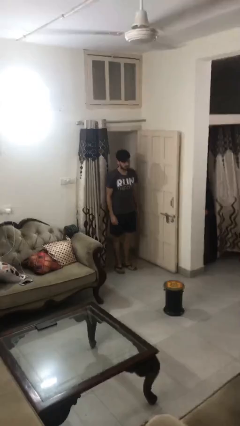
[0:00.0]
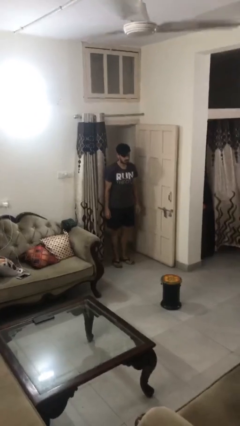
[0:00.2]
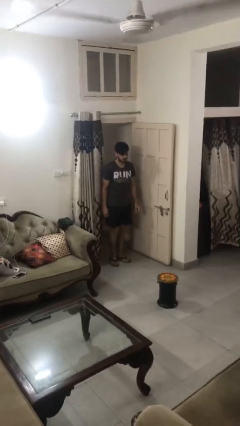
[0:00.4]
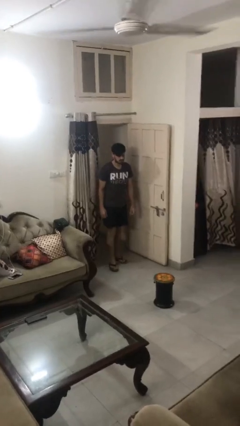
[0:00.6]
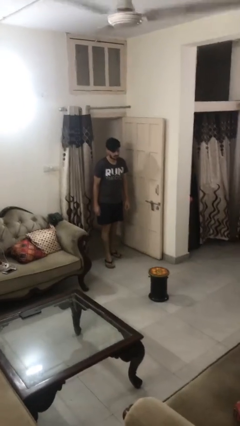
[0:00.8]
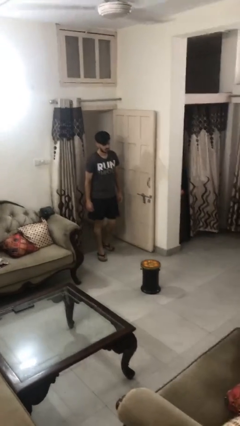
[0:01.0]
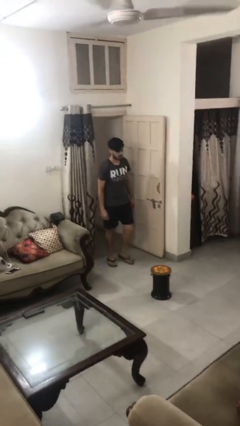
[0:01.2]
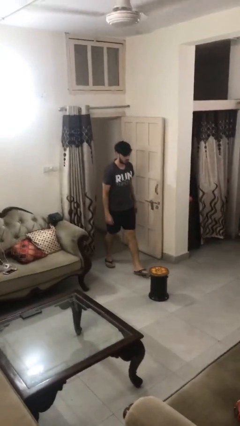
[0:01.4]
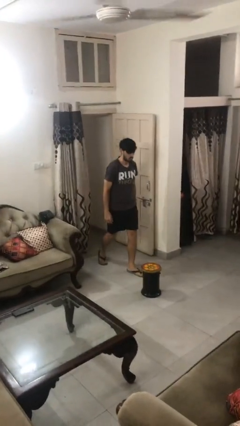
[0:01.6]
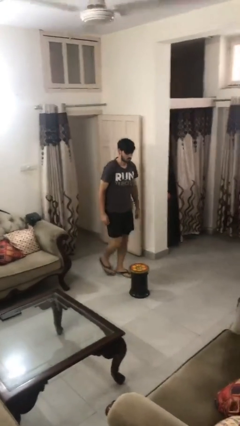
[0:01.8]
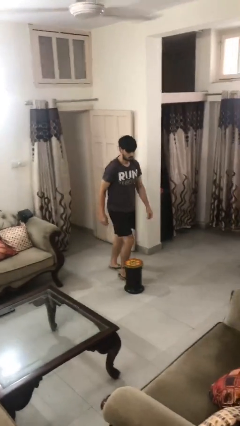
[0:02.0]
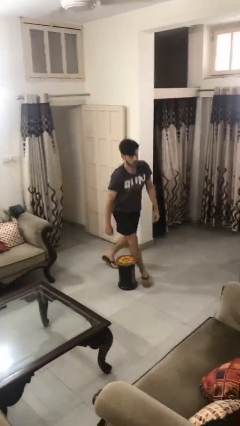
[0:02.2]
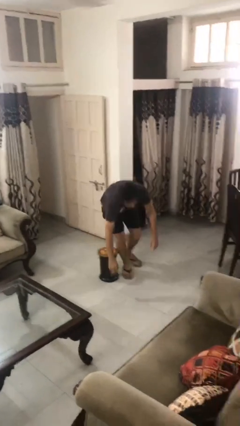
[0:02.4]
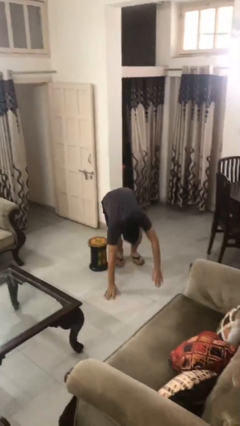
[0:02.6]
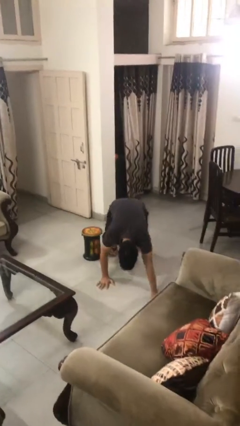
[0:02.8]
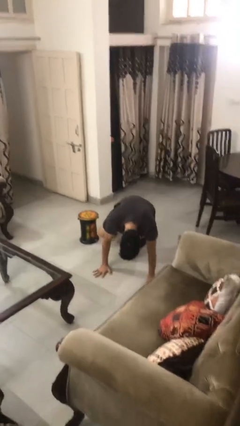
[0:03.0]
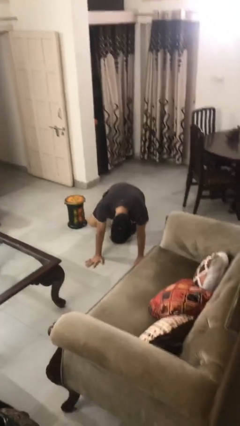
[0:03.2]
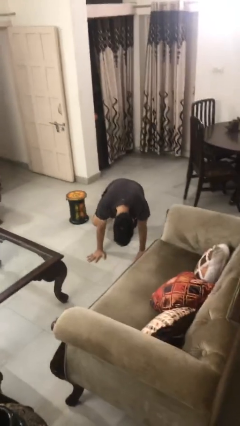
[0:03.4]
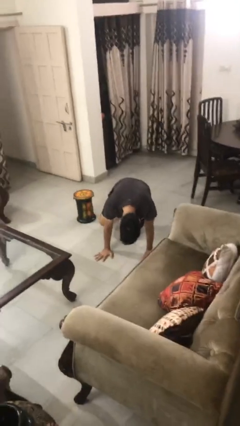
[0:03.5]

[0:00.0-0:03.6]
person trips on object on floor

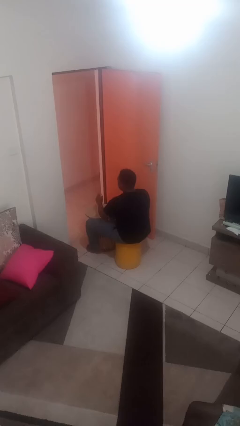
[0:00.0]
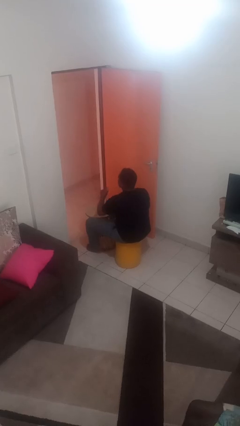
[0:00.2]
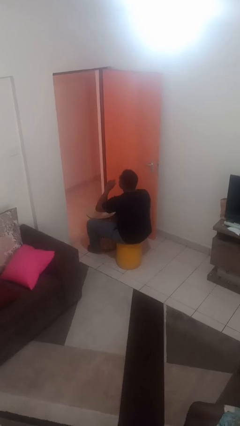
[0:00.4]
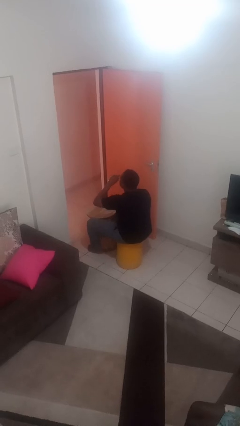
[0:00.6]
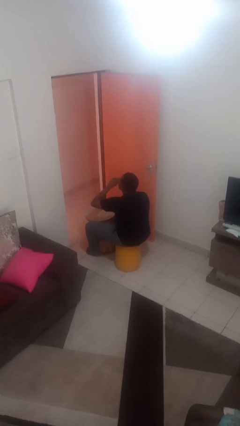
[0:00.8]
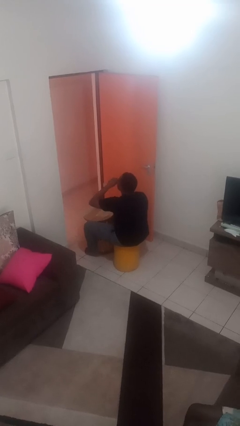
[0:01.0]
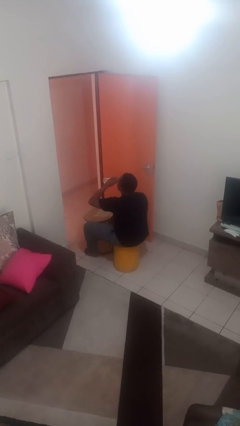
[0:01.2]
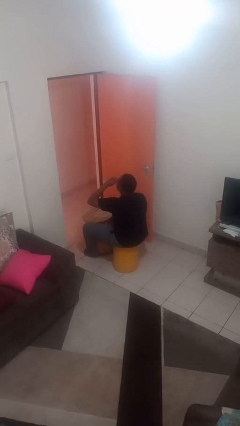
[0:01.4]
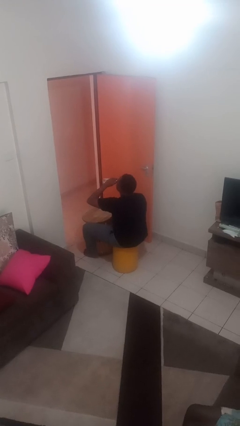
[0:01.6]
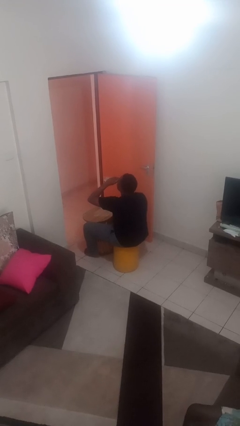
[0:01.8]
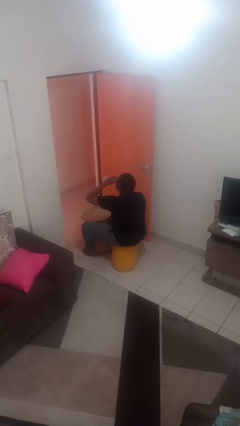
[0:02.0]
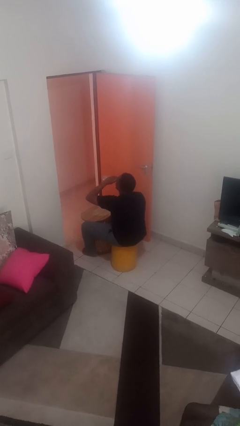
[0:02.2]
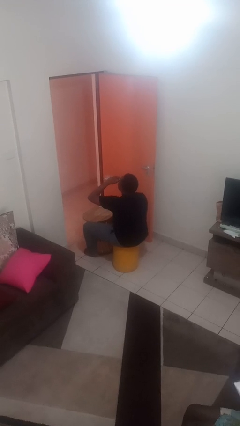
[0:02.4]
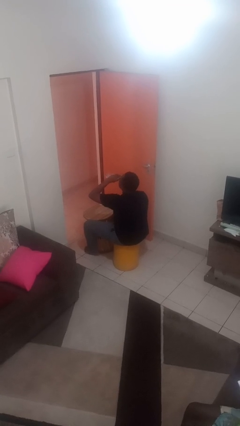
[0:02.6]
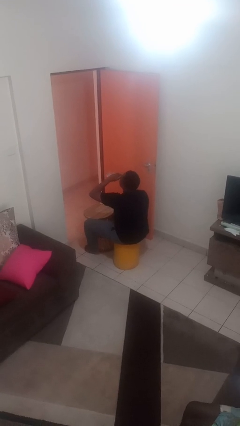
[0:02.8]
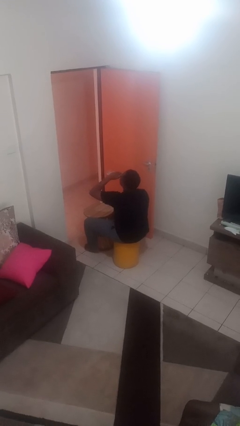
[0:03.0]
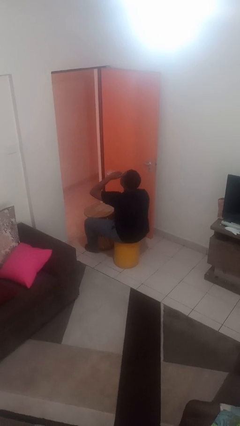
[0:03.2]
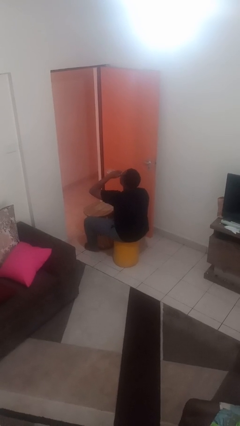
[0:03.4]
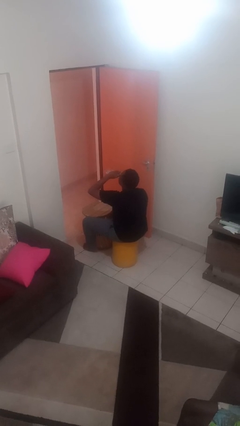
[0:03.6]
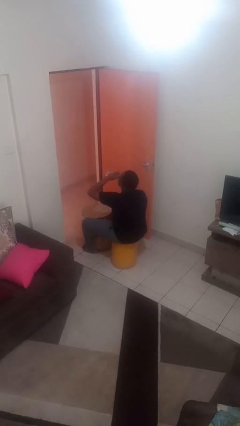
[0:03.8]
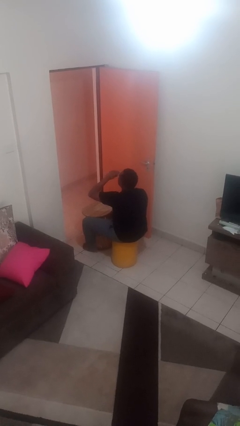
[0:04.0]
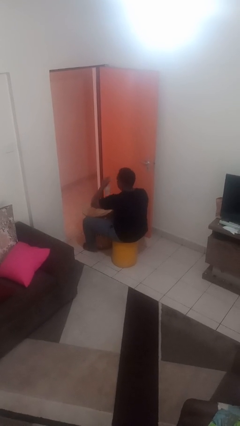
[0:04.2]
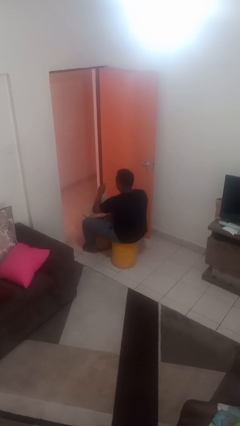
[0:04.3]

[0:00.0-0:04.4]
person drinks from bottle

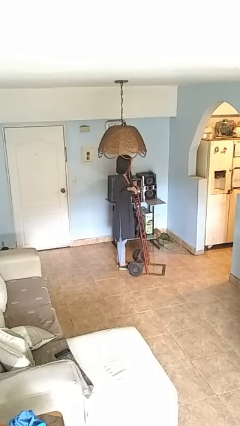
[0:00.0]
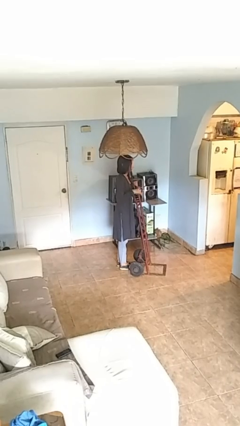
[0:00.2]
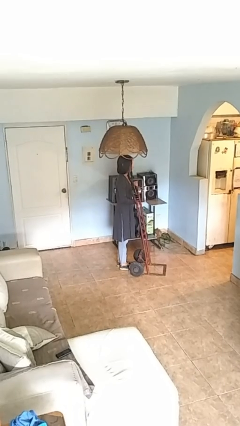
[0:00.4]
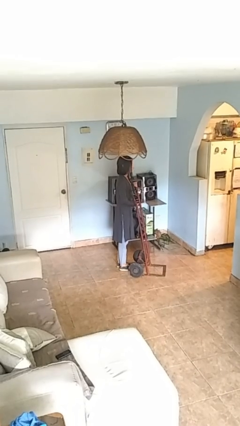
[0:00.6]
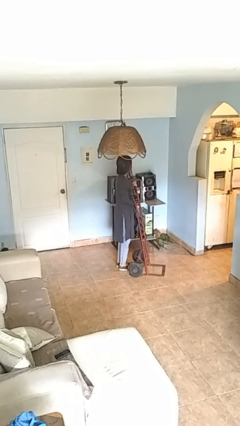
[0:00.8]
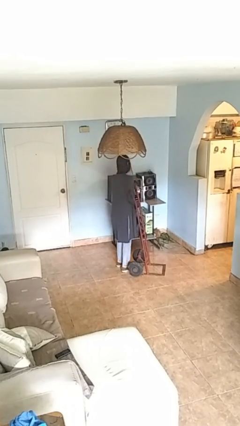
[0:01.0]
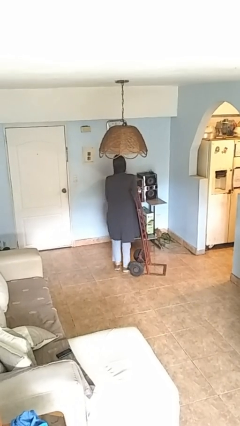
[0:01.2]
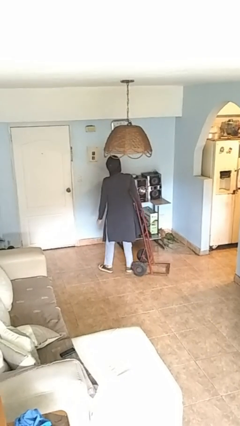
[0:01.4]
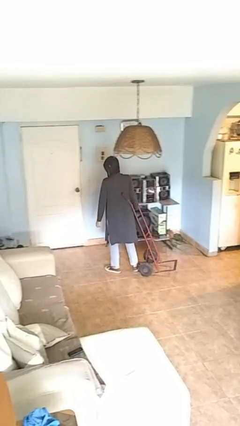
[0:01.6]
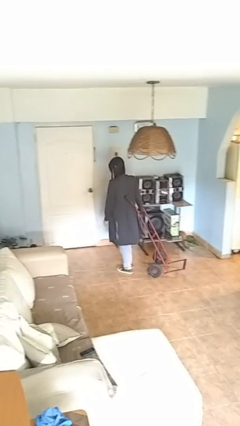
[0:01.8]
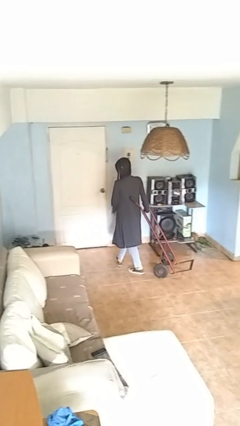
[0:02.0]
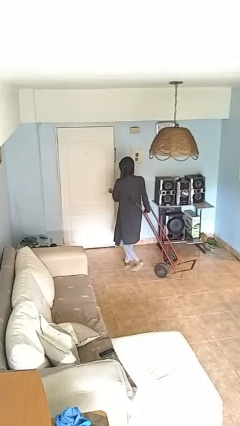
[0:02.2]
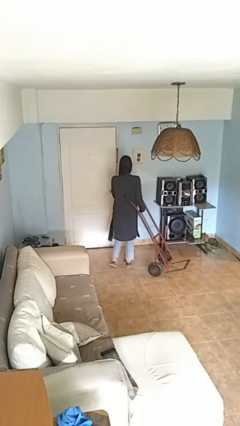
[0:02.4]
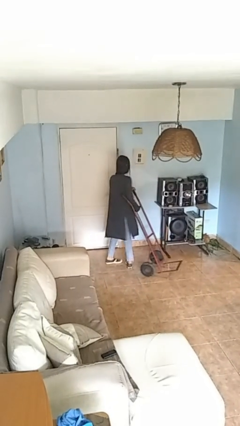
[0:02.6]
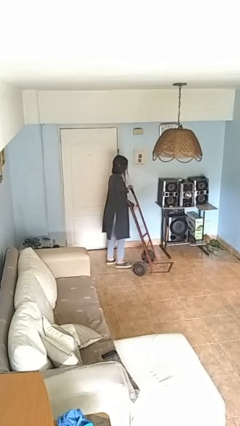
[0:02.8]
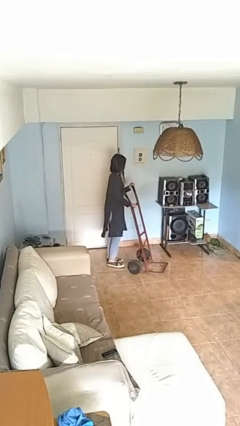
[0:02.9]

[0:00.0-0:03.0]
person pulls wheeled cart

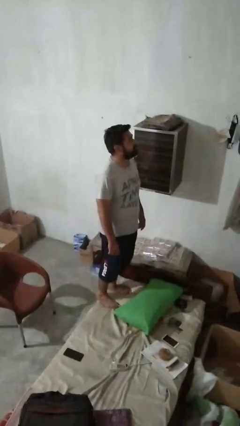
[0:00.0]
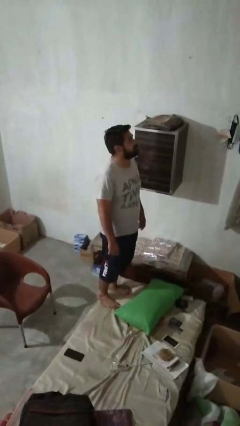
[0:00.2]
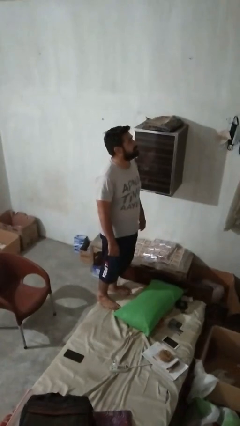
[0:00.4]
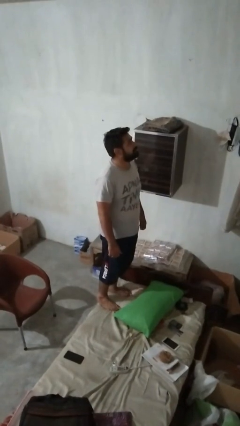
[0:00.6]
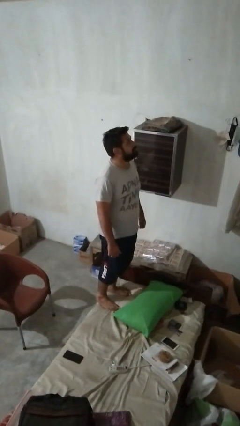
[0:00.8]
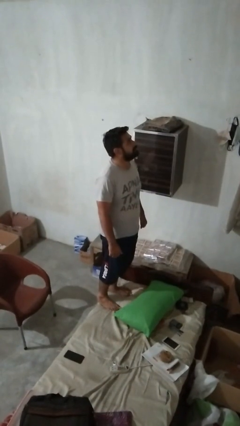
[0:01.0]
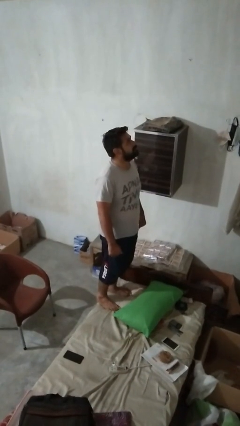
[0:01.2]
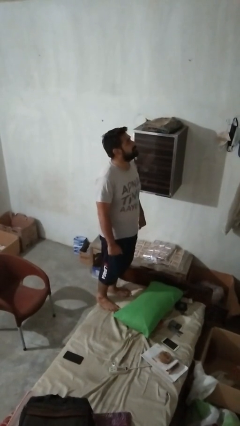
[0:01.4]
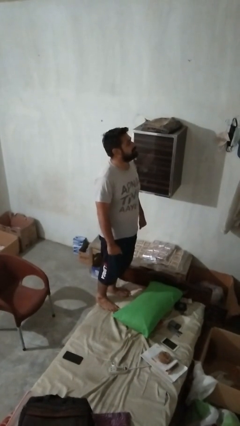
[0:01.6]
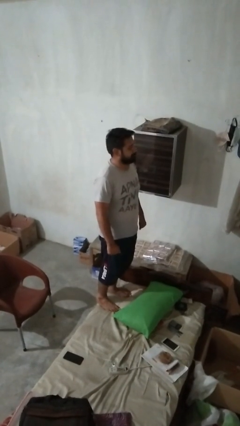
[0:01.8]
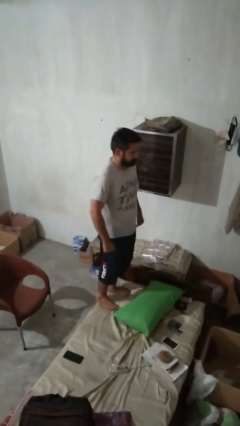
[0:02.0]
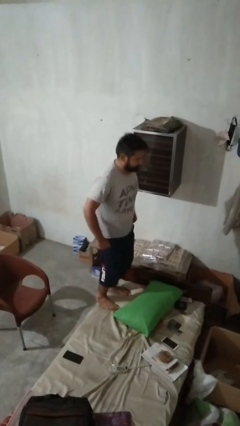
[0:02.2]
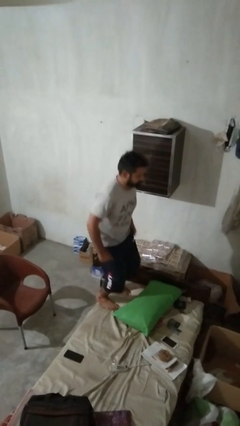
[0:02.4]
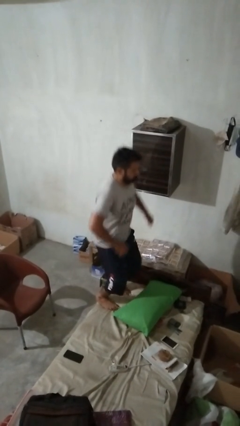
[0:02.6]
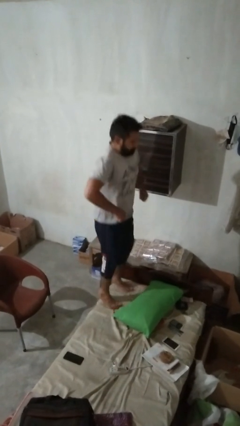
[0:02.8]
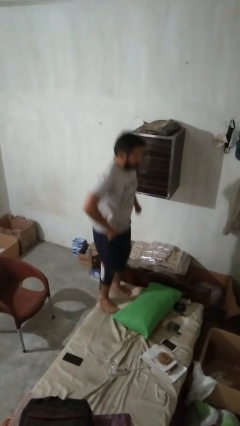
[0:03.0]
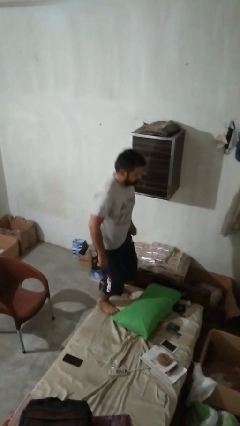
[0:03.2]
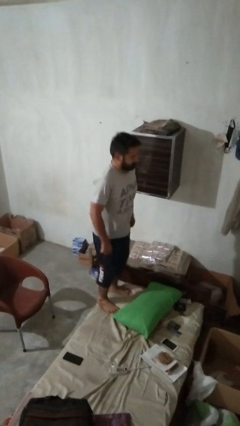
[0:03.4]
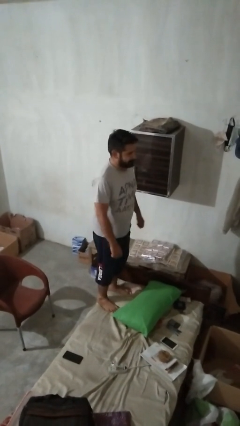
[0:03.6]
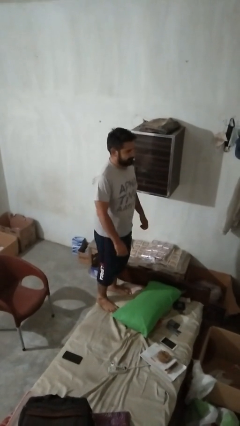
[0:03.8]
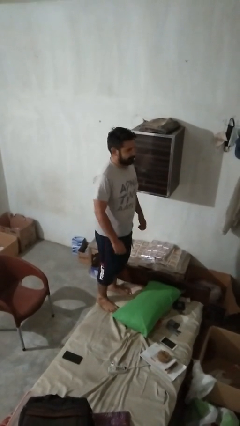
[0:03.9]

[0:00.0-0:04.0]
person jumps on couch

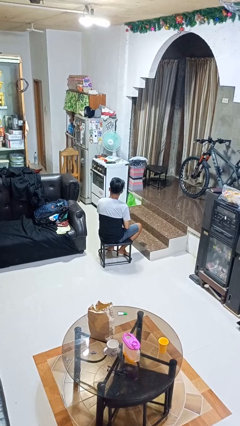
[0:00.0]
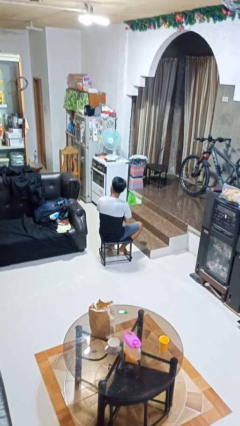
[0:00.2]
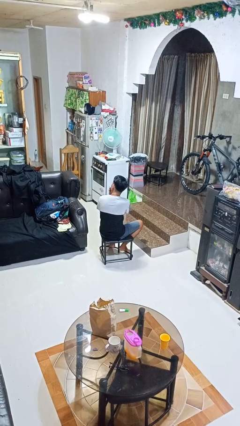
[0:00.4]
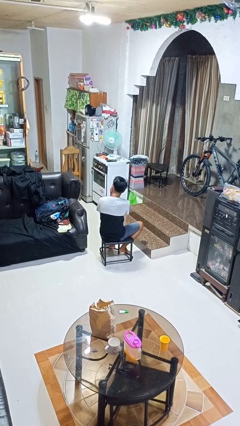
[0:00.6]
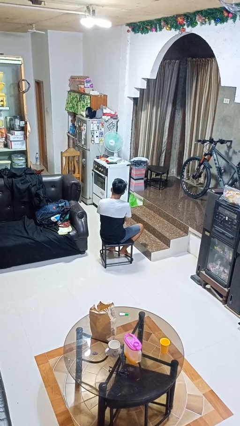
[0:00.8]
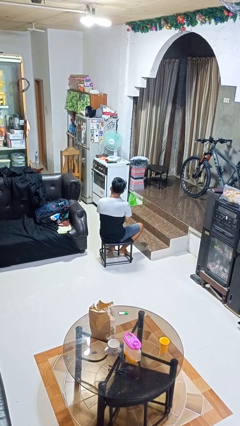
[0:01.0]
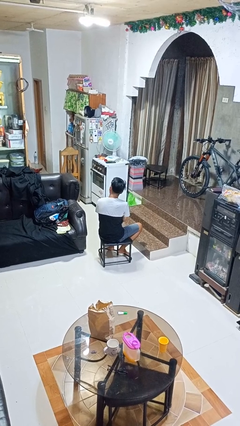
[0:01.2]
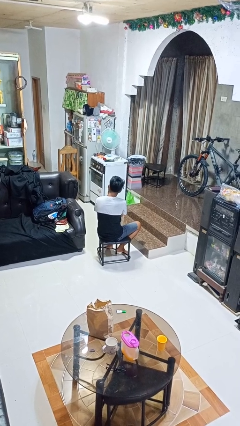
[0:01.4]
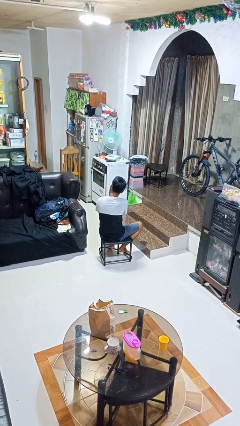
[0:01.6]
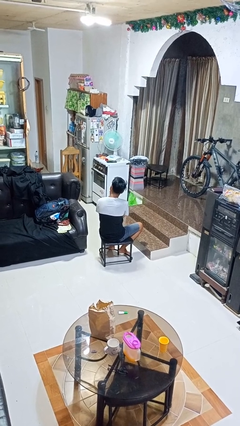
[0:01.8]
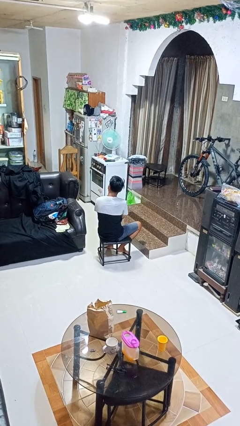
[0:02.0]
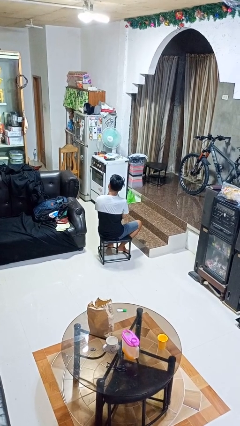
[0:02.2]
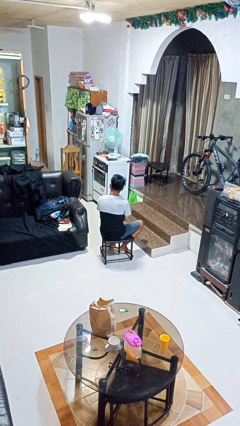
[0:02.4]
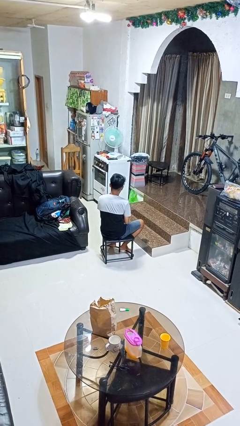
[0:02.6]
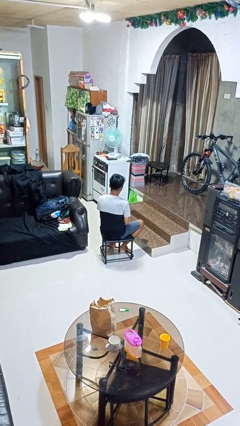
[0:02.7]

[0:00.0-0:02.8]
person strokes chin
